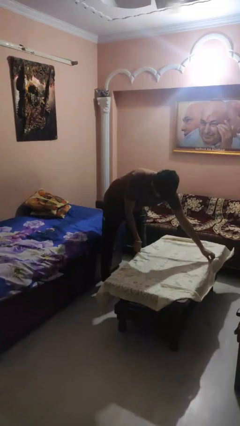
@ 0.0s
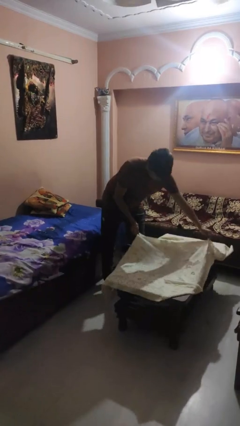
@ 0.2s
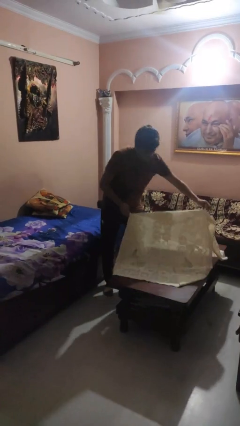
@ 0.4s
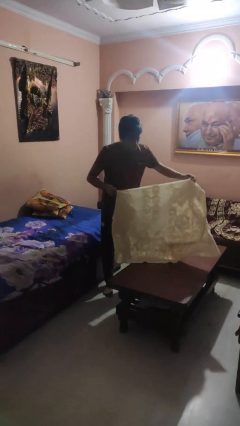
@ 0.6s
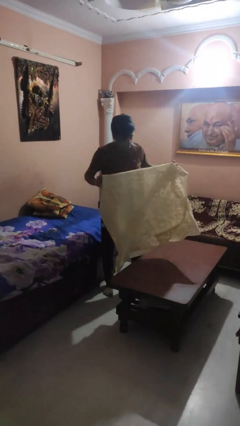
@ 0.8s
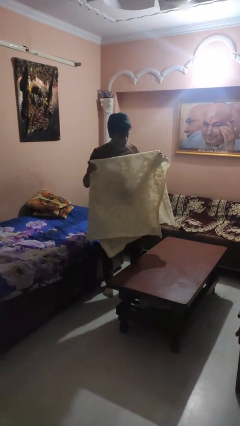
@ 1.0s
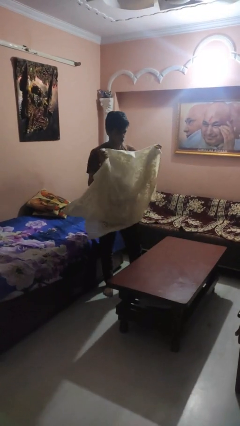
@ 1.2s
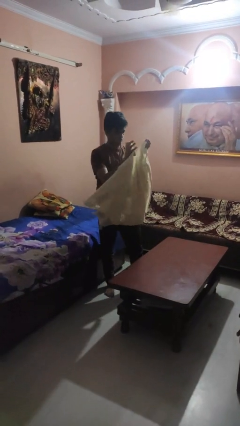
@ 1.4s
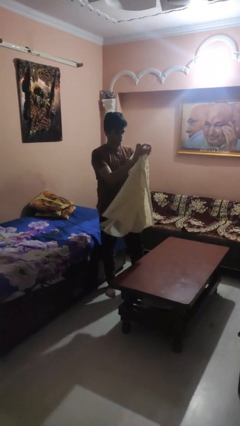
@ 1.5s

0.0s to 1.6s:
person folds tablecloth

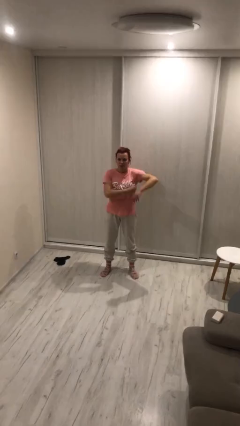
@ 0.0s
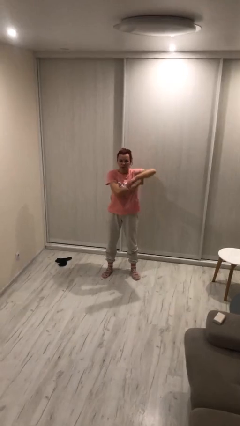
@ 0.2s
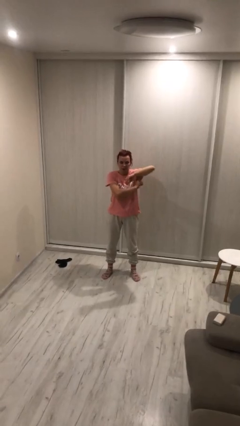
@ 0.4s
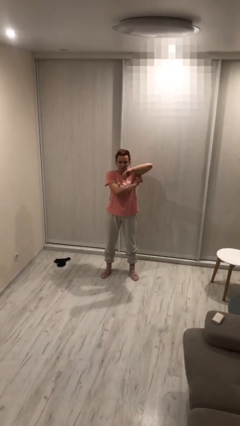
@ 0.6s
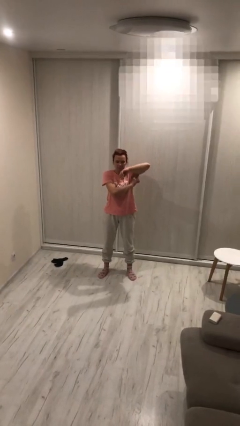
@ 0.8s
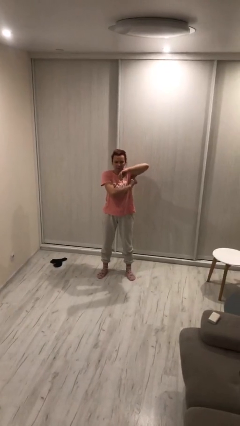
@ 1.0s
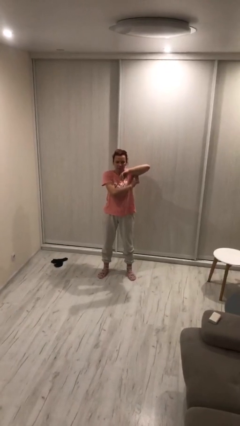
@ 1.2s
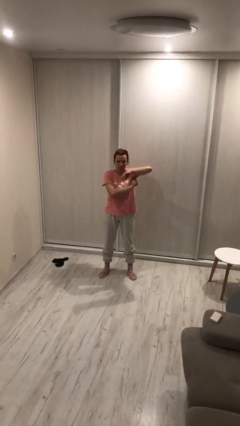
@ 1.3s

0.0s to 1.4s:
person applies deodorant

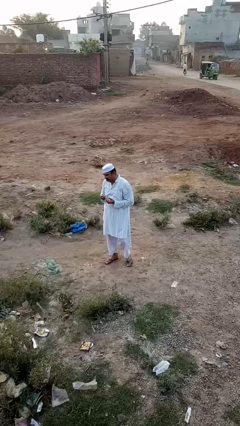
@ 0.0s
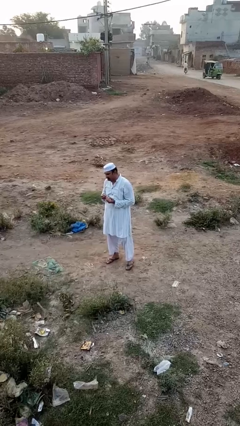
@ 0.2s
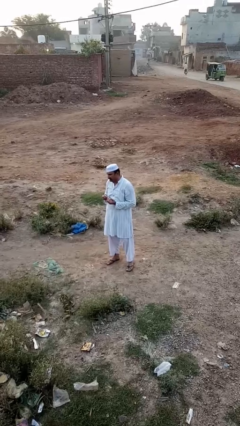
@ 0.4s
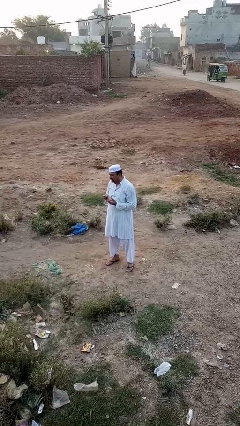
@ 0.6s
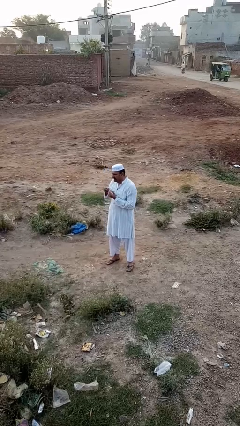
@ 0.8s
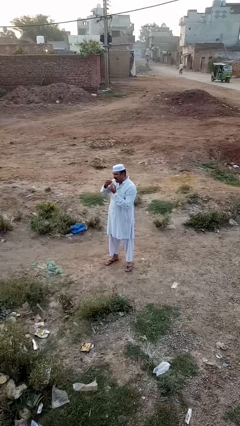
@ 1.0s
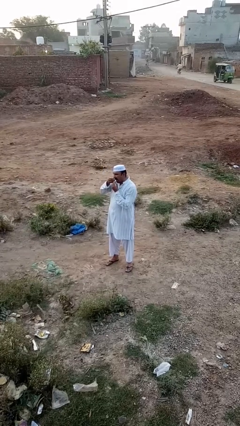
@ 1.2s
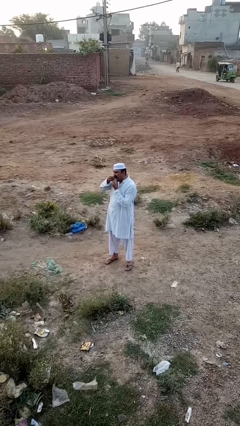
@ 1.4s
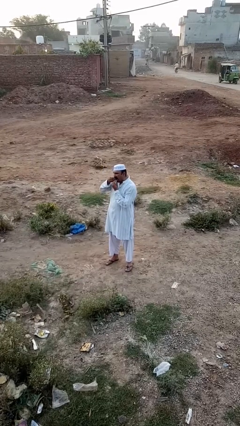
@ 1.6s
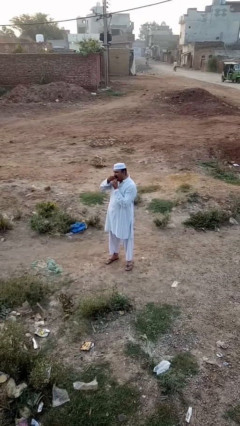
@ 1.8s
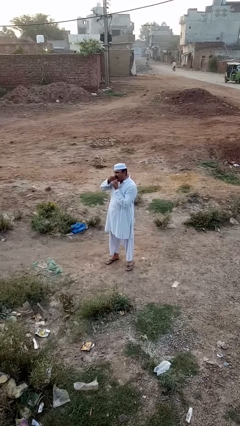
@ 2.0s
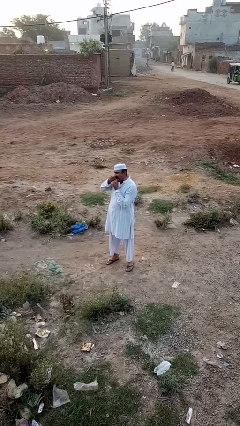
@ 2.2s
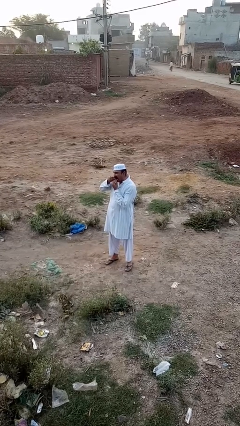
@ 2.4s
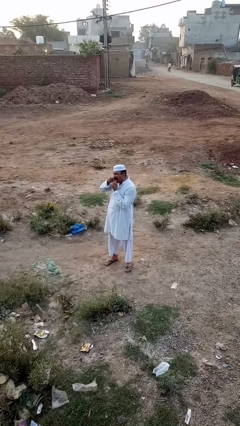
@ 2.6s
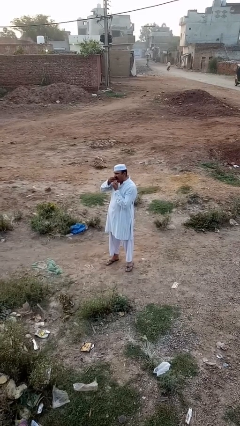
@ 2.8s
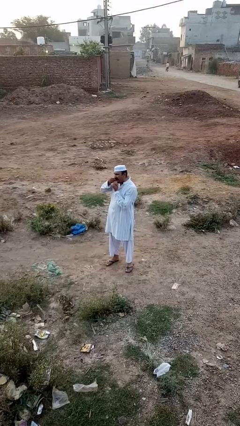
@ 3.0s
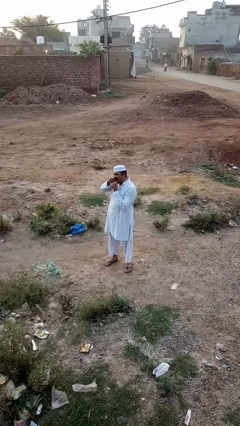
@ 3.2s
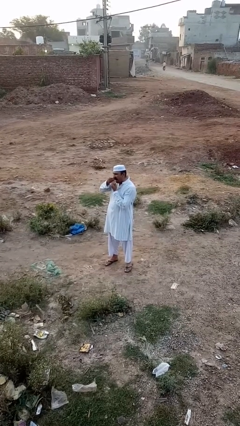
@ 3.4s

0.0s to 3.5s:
person flosses

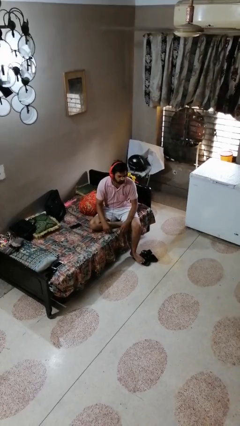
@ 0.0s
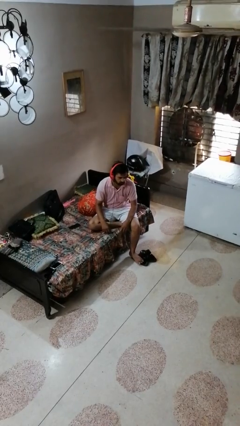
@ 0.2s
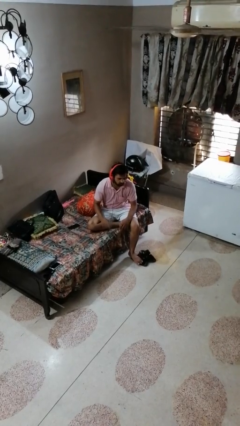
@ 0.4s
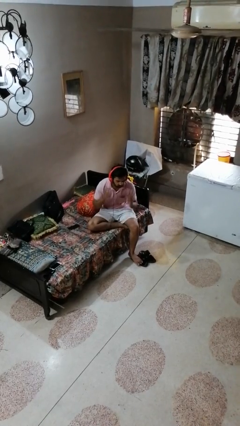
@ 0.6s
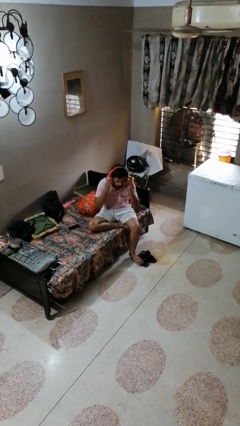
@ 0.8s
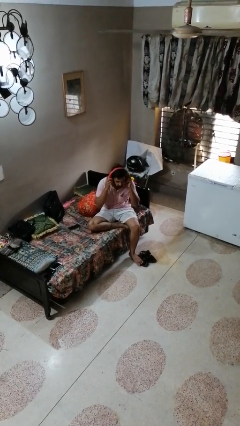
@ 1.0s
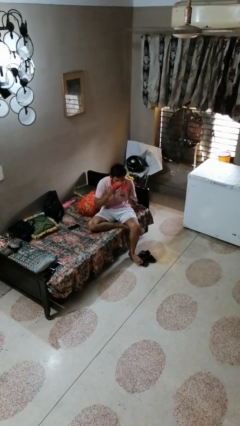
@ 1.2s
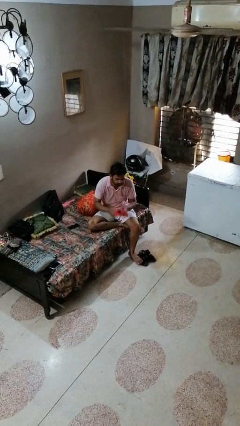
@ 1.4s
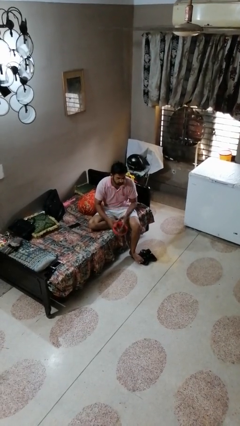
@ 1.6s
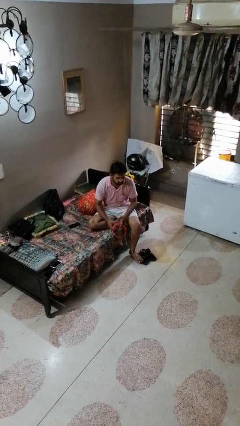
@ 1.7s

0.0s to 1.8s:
person takes off headphones

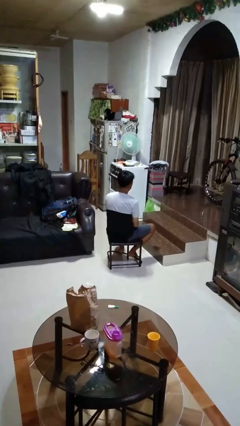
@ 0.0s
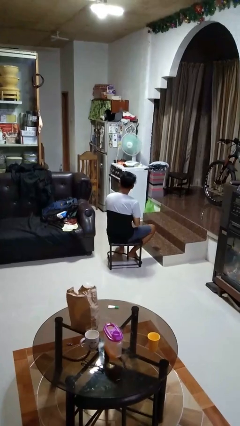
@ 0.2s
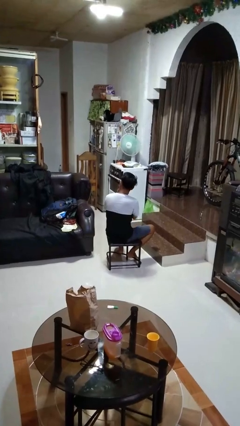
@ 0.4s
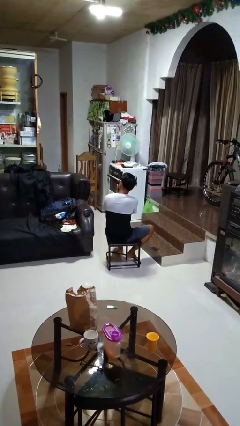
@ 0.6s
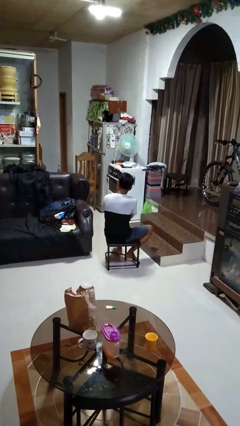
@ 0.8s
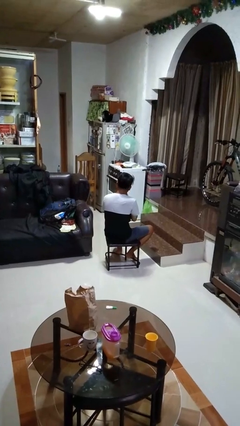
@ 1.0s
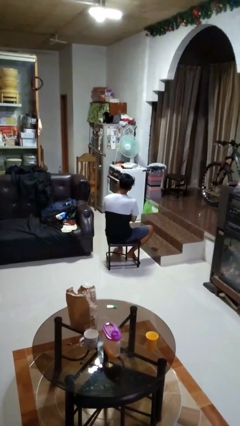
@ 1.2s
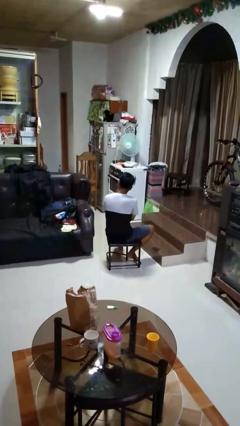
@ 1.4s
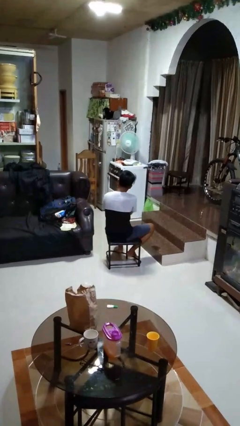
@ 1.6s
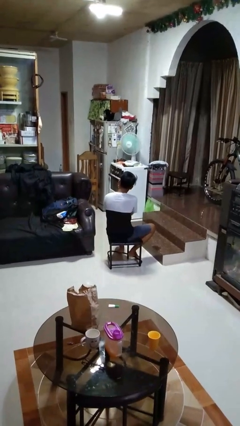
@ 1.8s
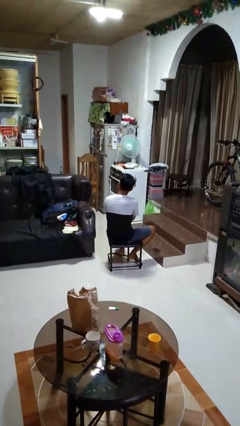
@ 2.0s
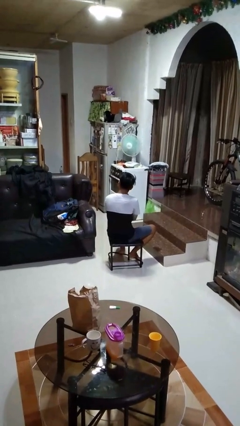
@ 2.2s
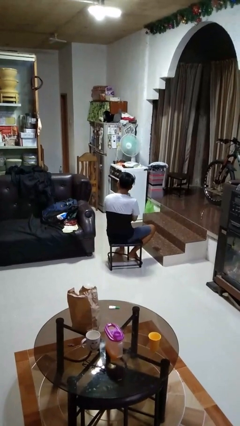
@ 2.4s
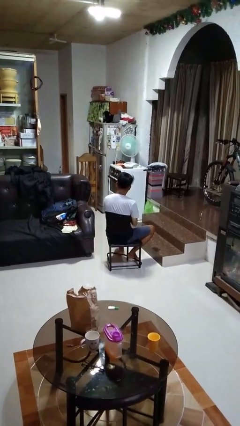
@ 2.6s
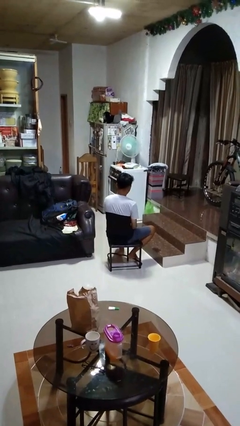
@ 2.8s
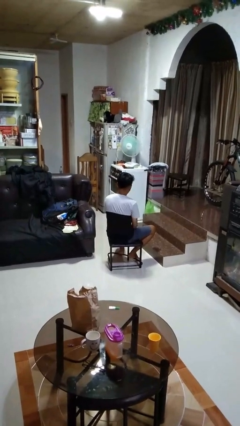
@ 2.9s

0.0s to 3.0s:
person strokes chin

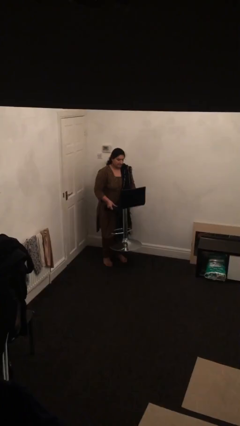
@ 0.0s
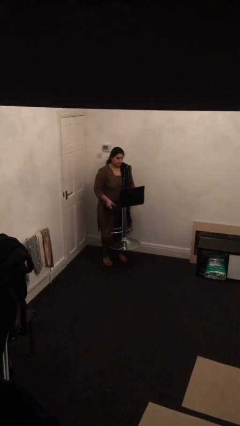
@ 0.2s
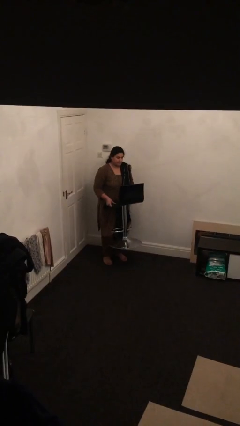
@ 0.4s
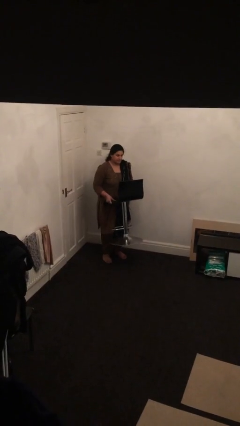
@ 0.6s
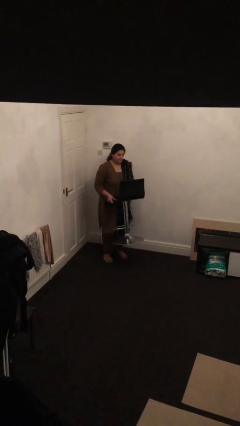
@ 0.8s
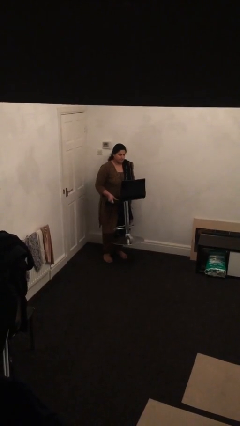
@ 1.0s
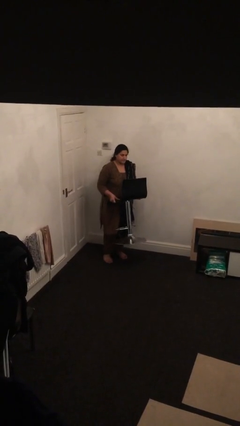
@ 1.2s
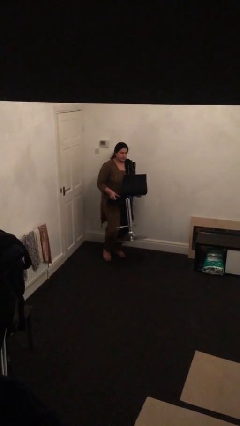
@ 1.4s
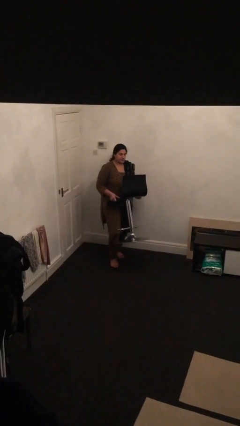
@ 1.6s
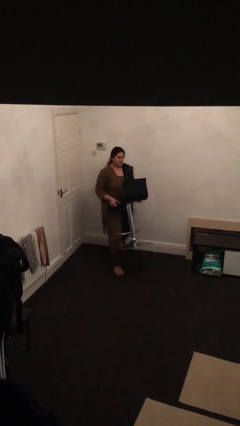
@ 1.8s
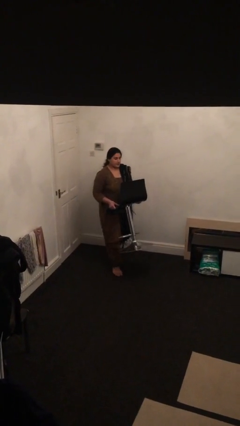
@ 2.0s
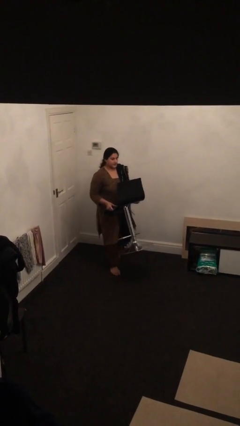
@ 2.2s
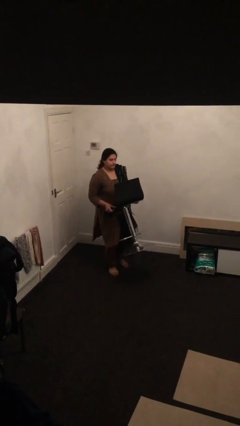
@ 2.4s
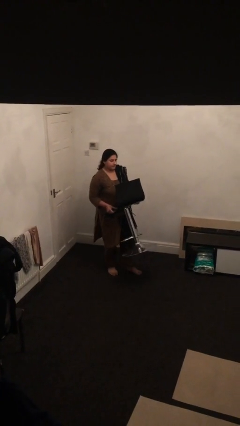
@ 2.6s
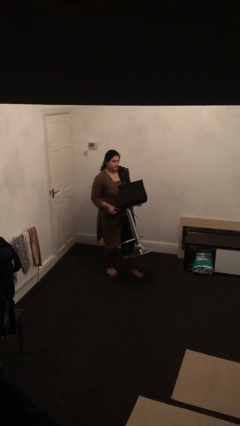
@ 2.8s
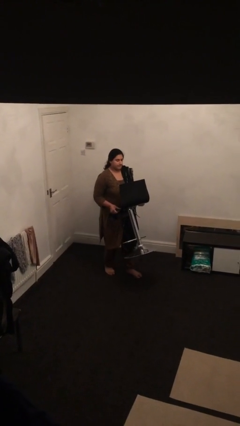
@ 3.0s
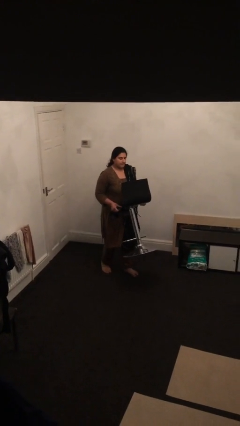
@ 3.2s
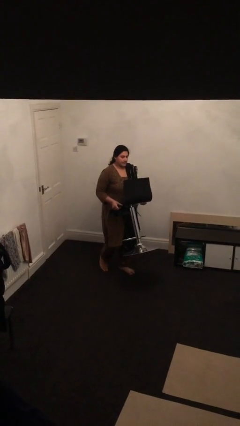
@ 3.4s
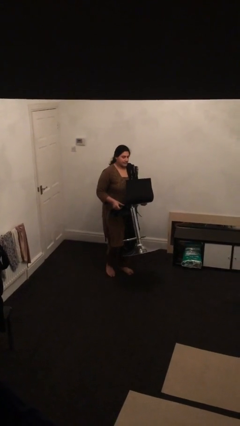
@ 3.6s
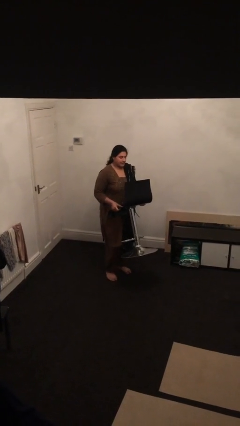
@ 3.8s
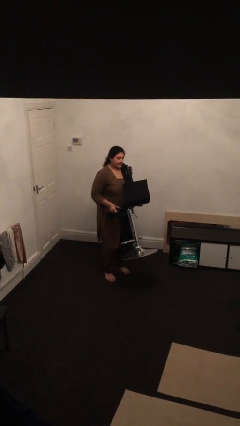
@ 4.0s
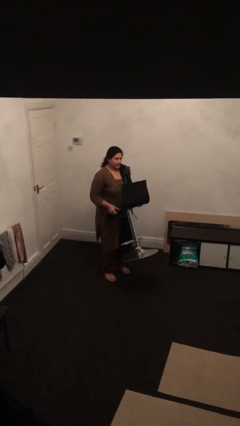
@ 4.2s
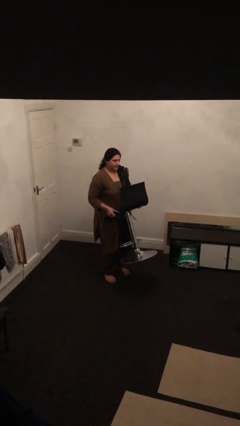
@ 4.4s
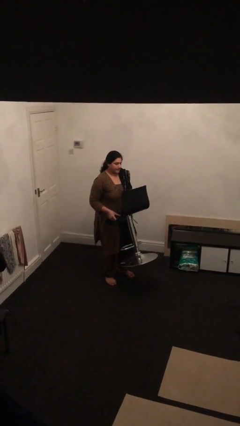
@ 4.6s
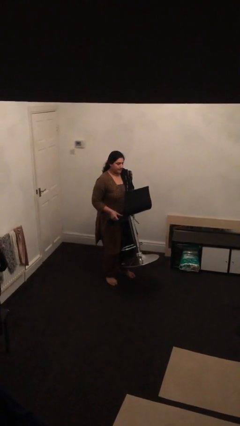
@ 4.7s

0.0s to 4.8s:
person carries heavy object

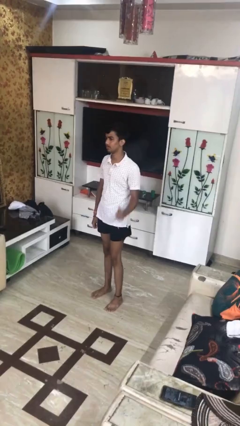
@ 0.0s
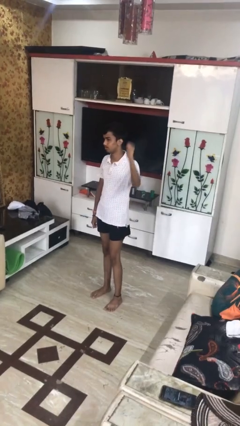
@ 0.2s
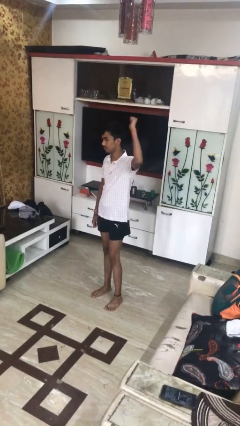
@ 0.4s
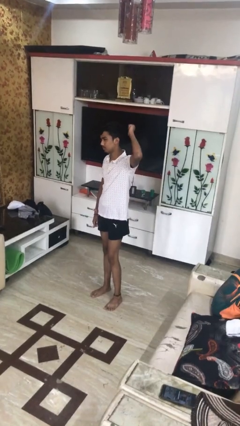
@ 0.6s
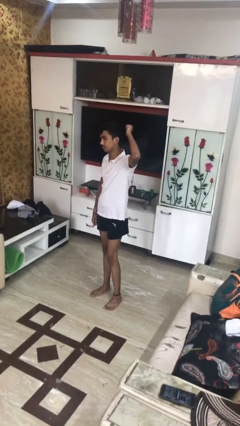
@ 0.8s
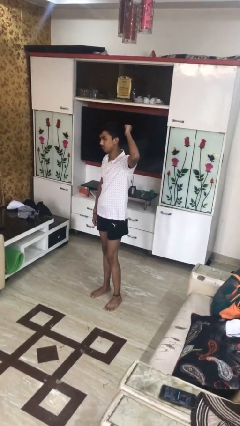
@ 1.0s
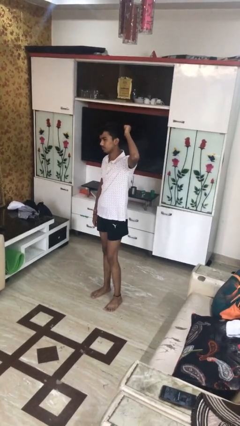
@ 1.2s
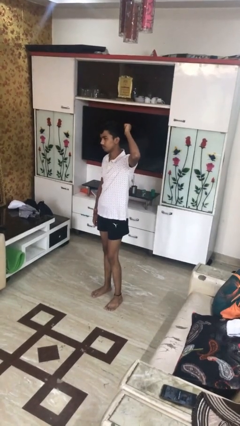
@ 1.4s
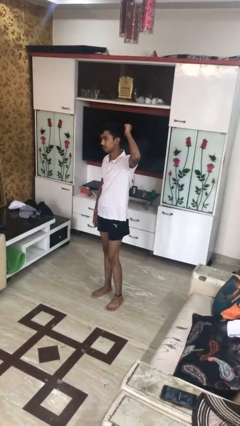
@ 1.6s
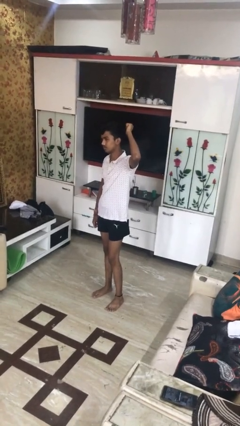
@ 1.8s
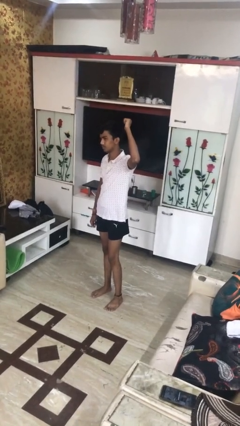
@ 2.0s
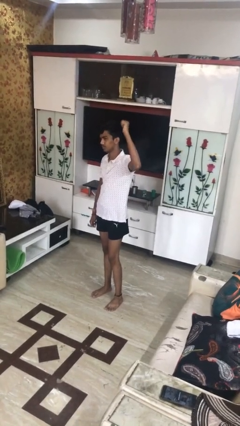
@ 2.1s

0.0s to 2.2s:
person gestures behind me
